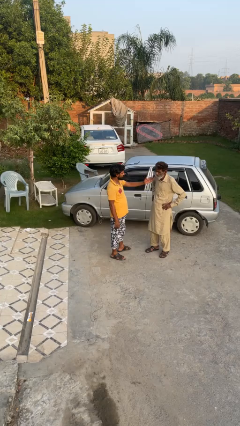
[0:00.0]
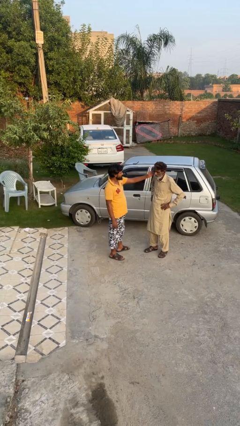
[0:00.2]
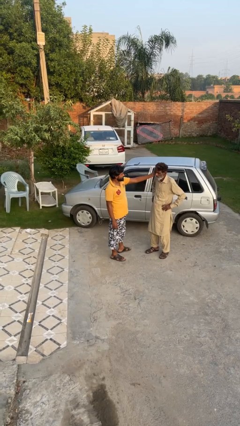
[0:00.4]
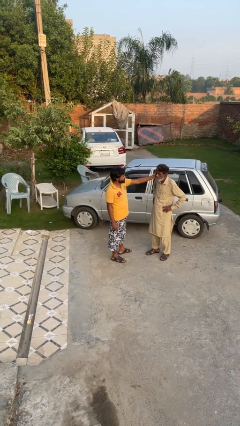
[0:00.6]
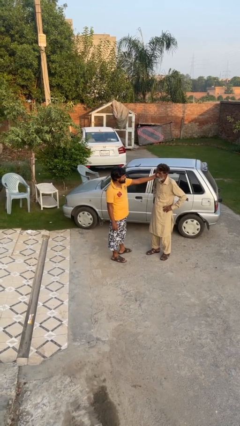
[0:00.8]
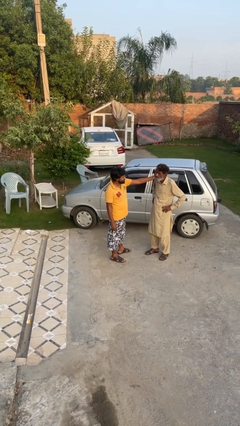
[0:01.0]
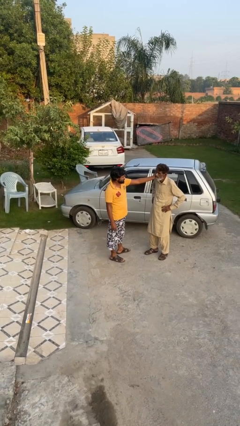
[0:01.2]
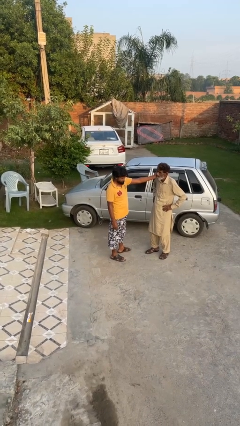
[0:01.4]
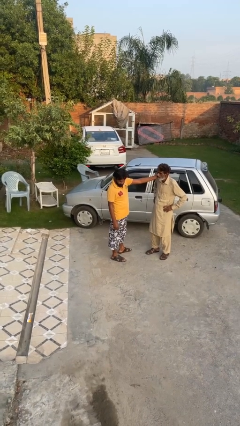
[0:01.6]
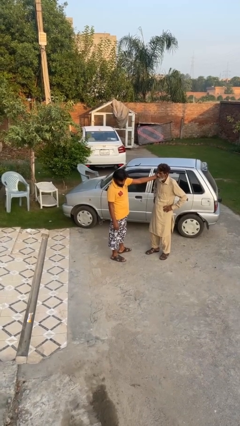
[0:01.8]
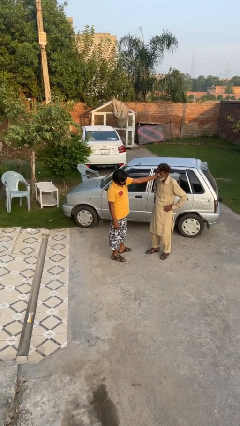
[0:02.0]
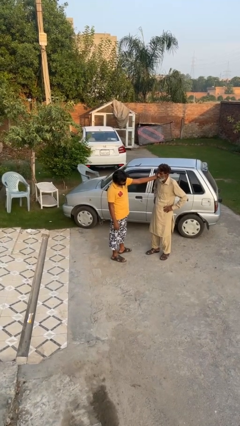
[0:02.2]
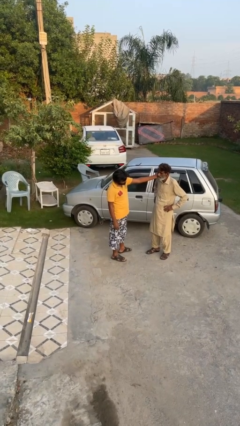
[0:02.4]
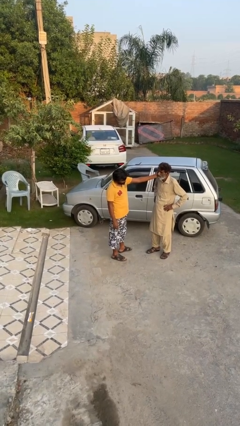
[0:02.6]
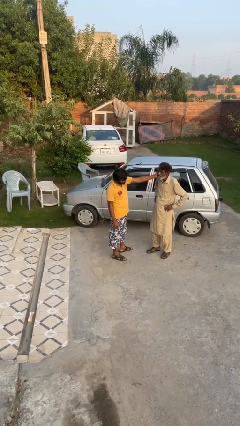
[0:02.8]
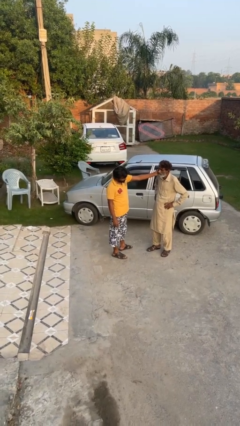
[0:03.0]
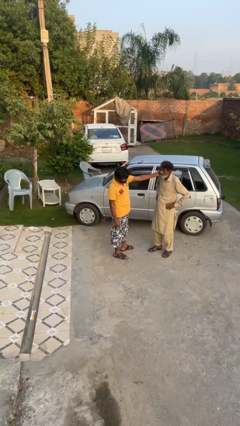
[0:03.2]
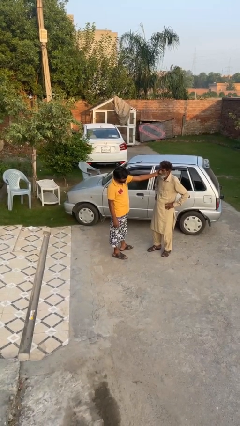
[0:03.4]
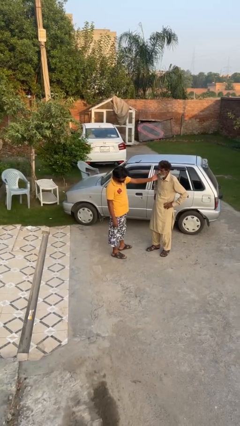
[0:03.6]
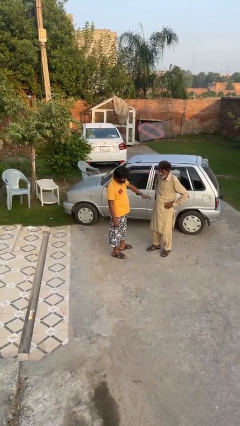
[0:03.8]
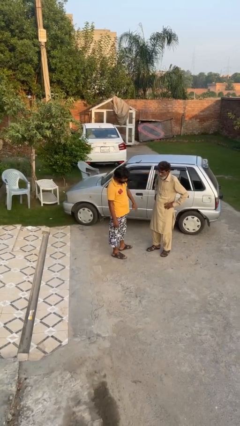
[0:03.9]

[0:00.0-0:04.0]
person touches face of person

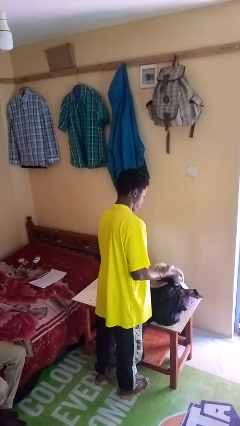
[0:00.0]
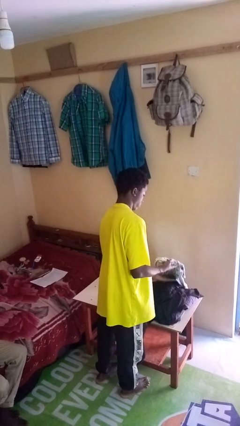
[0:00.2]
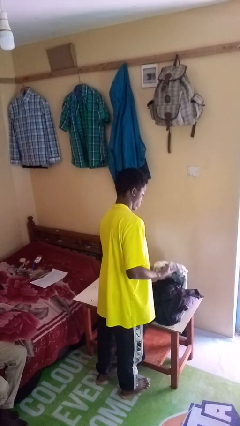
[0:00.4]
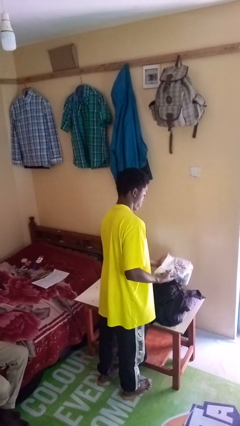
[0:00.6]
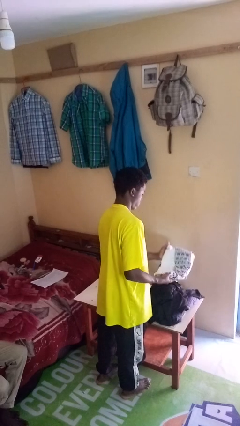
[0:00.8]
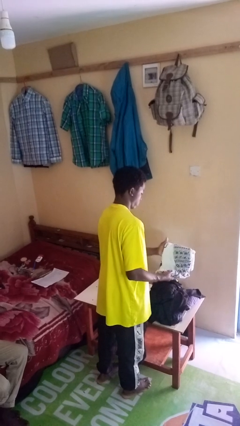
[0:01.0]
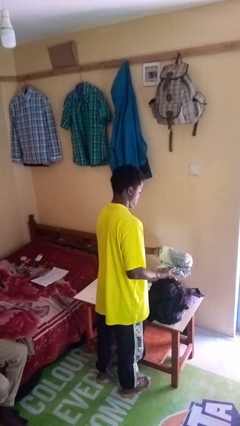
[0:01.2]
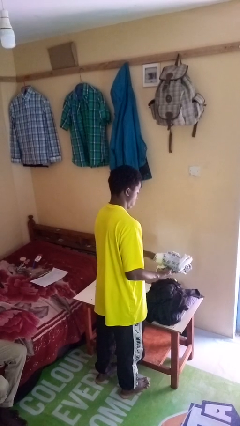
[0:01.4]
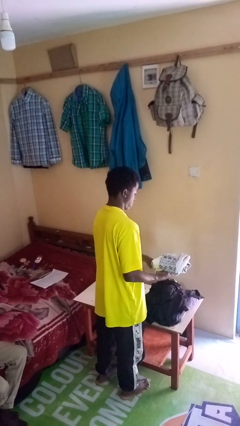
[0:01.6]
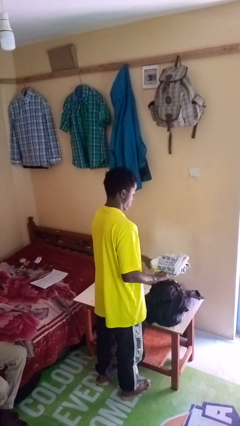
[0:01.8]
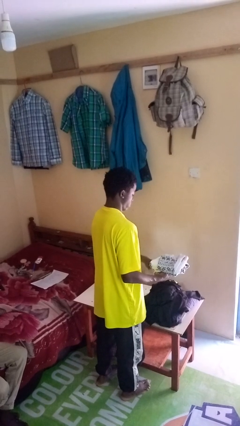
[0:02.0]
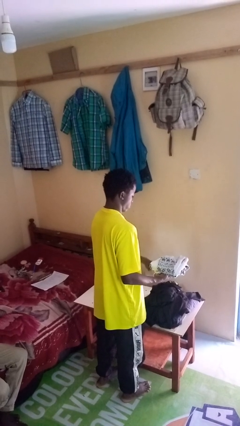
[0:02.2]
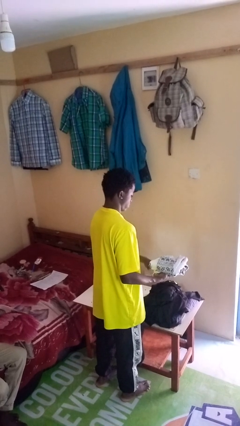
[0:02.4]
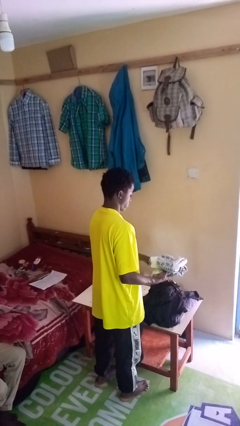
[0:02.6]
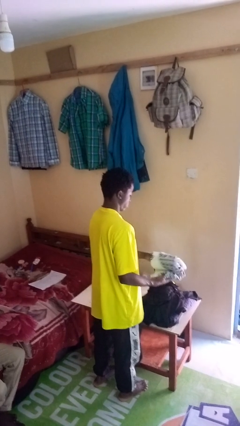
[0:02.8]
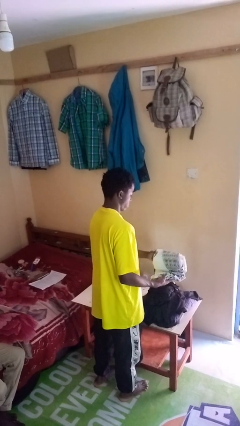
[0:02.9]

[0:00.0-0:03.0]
person folds shirt

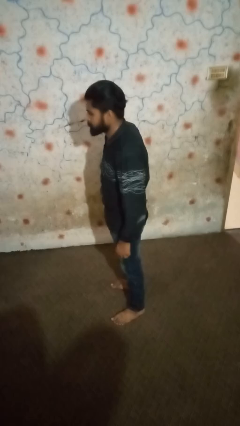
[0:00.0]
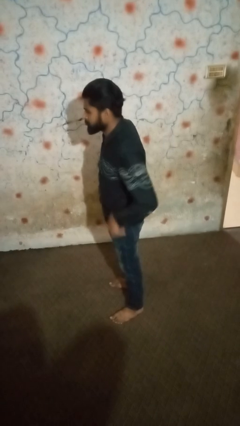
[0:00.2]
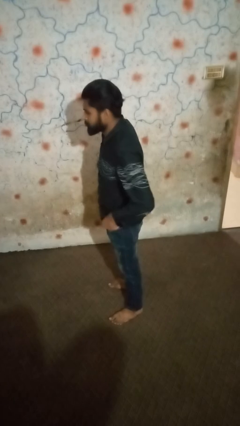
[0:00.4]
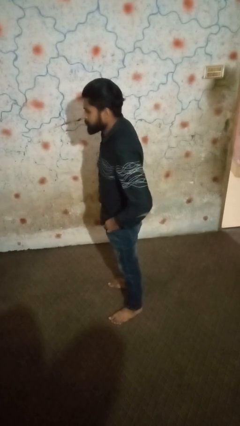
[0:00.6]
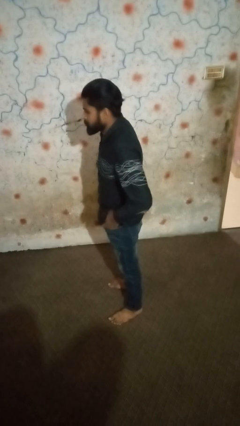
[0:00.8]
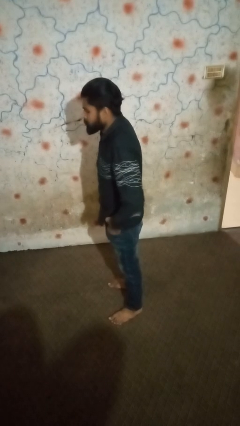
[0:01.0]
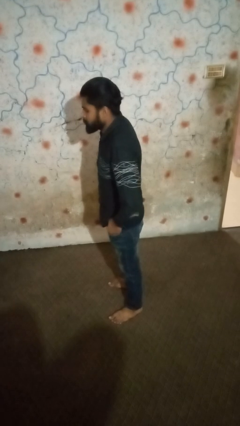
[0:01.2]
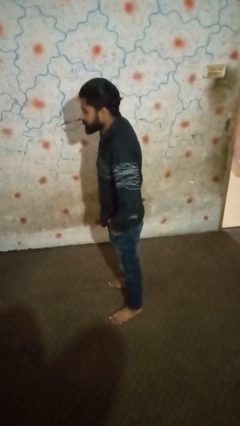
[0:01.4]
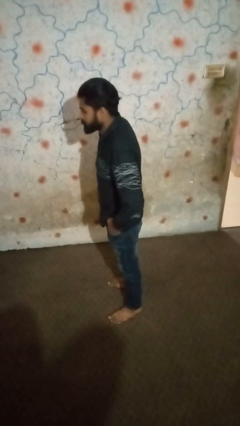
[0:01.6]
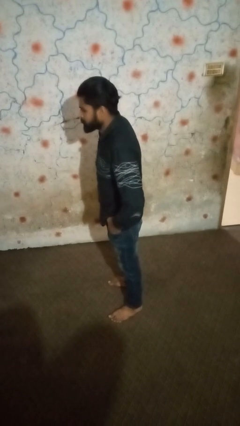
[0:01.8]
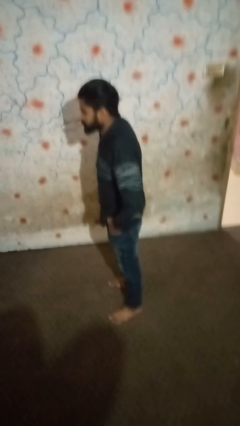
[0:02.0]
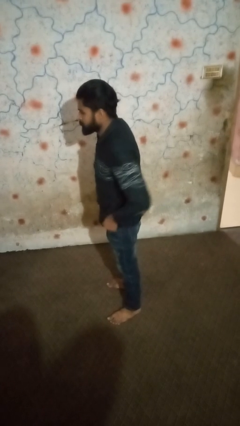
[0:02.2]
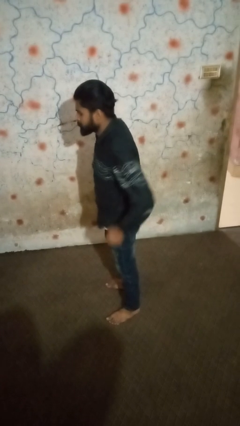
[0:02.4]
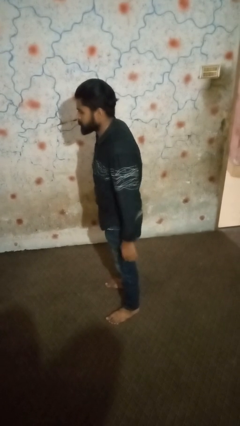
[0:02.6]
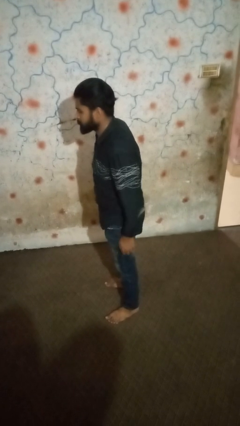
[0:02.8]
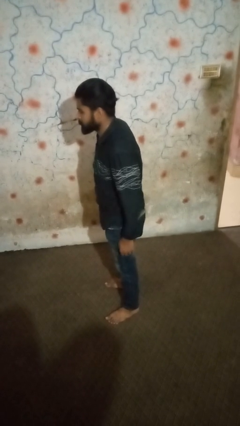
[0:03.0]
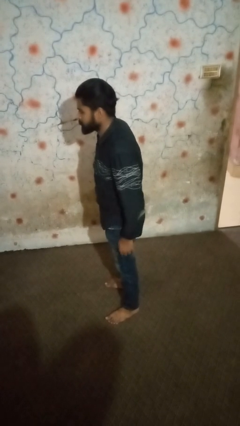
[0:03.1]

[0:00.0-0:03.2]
person puts hands in back pockets

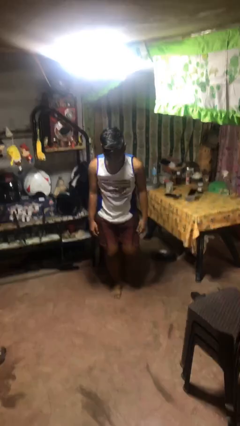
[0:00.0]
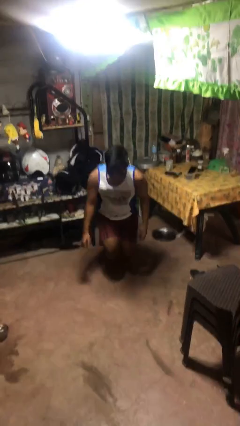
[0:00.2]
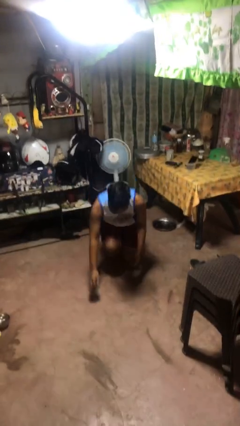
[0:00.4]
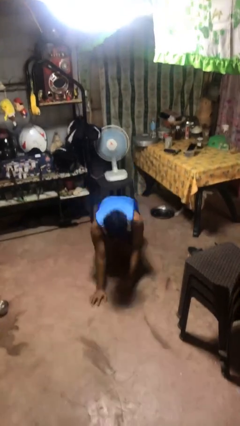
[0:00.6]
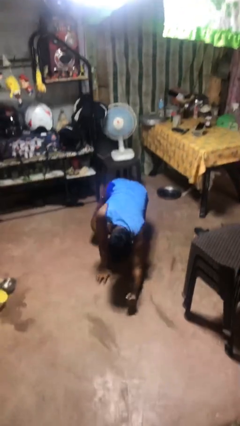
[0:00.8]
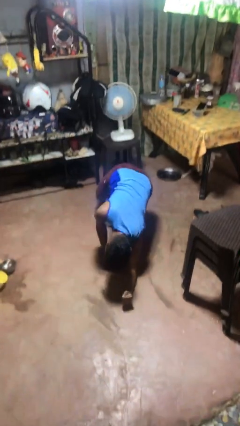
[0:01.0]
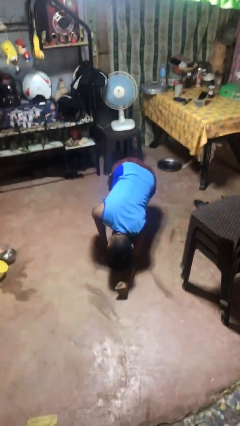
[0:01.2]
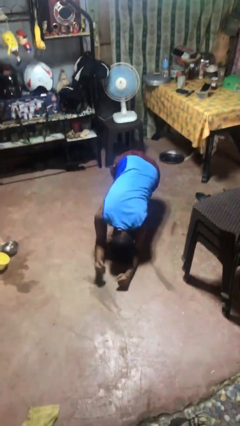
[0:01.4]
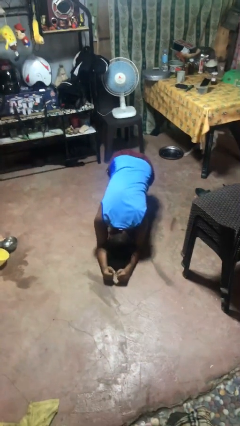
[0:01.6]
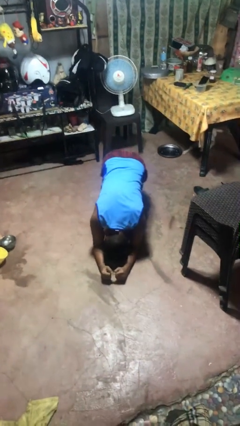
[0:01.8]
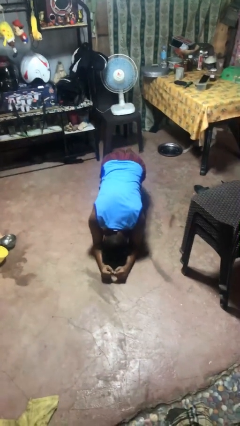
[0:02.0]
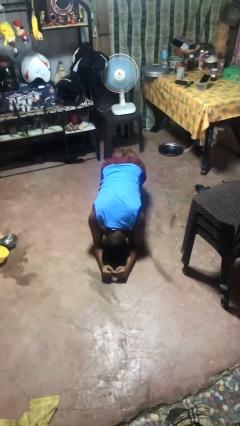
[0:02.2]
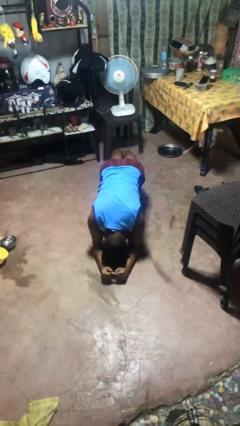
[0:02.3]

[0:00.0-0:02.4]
person exercises with plank

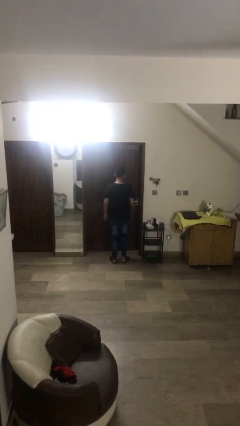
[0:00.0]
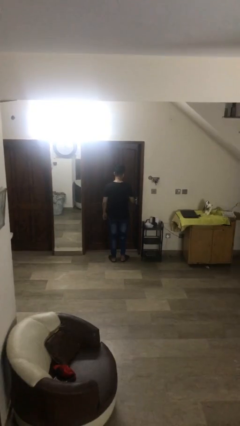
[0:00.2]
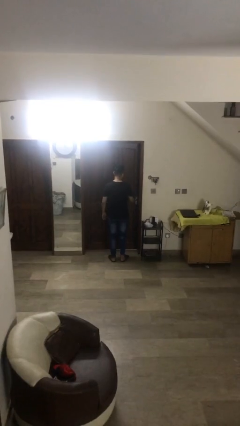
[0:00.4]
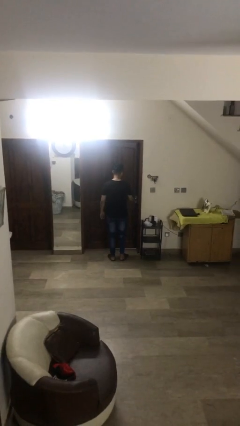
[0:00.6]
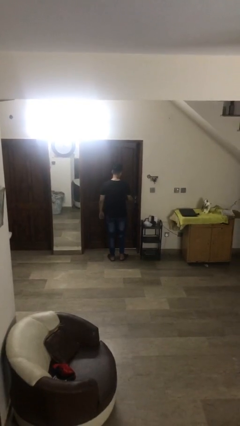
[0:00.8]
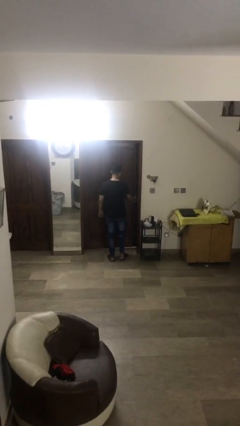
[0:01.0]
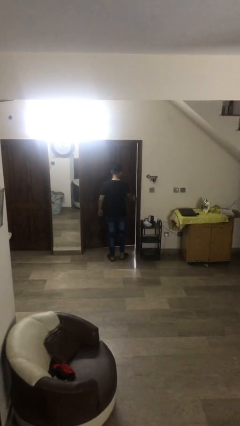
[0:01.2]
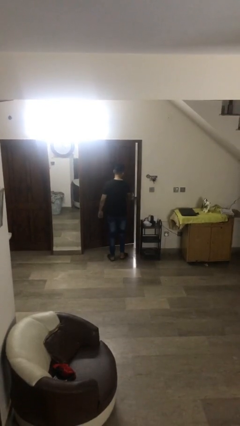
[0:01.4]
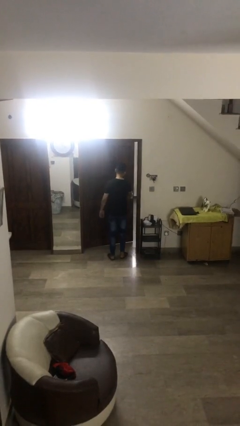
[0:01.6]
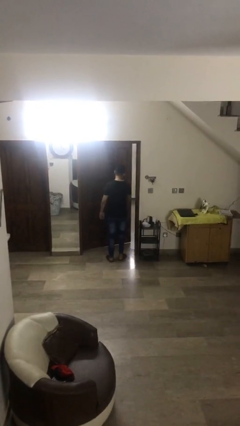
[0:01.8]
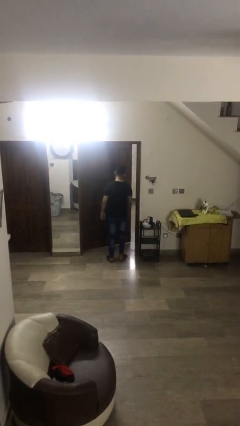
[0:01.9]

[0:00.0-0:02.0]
person opens facility door

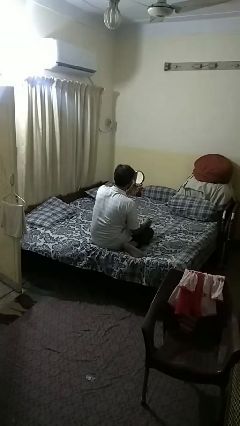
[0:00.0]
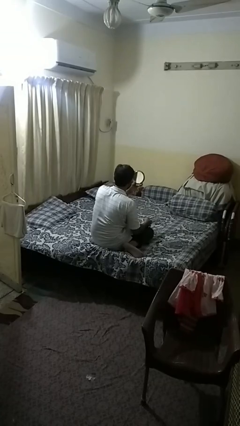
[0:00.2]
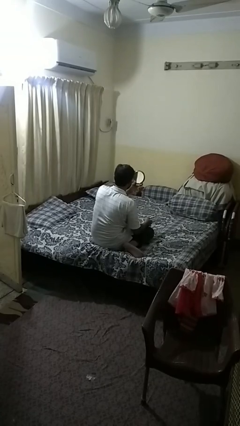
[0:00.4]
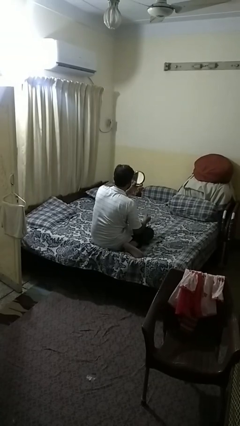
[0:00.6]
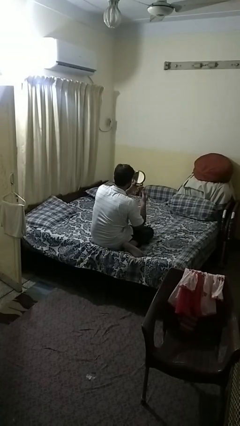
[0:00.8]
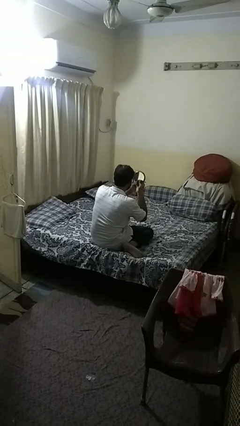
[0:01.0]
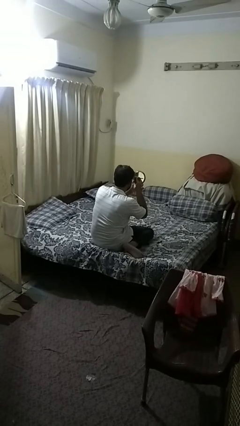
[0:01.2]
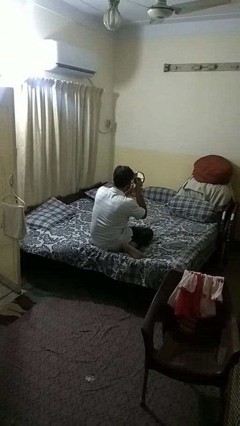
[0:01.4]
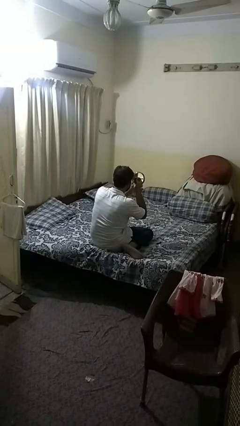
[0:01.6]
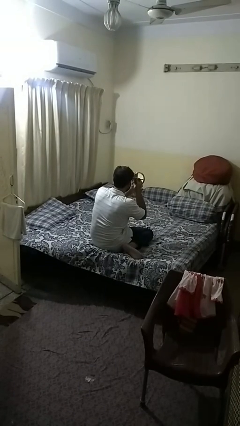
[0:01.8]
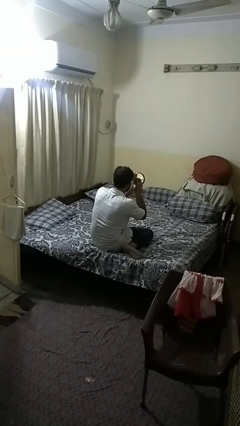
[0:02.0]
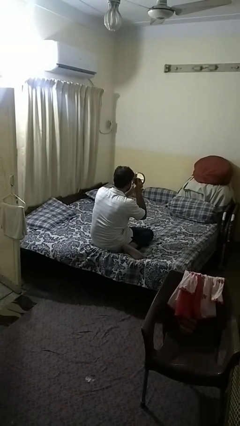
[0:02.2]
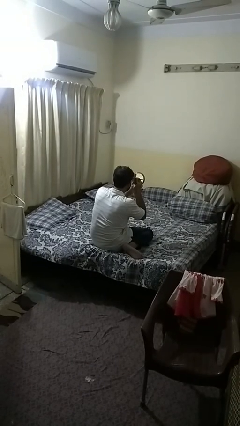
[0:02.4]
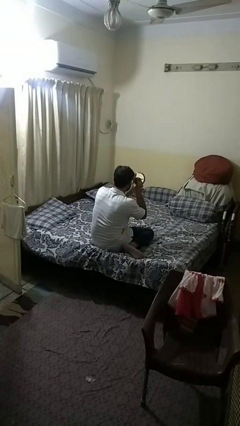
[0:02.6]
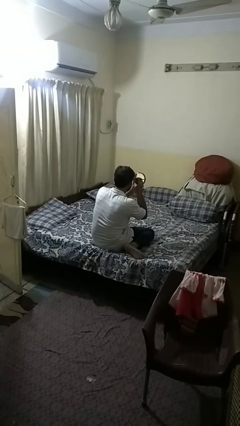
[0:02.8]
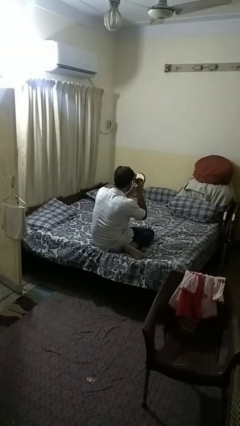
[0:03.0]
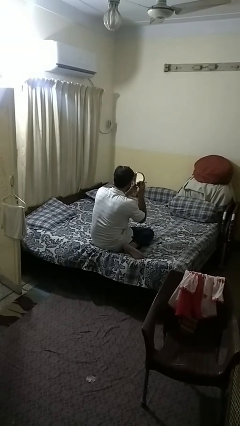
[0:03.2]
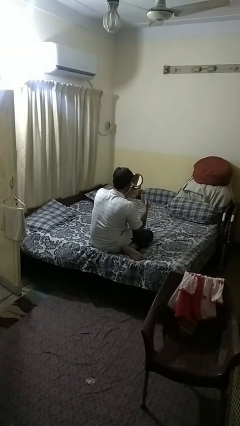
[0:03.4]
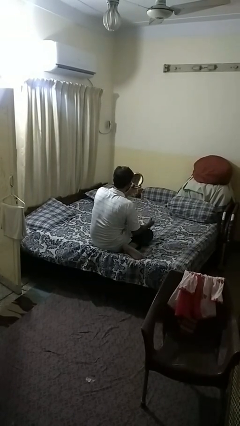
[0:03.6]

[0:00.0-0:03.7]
person applies eye makeup
